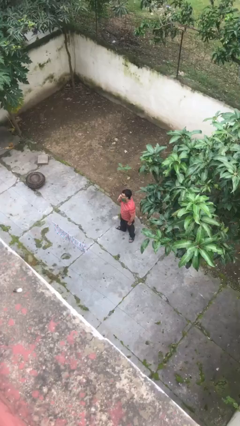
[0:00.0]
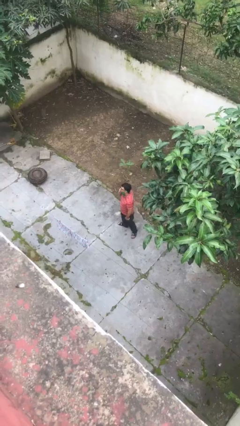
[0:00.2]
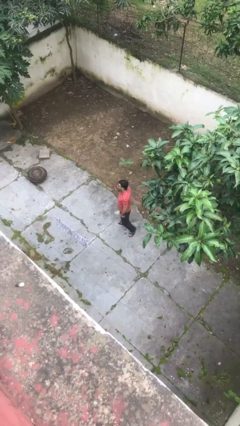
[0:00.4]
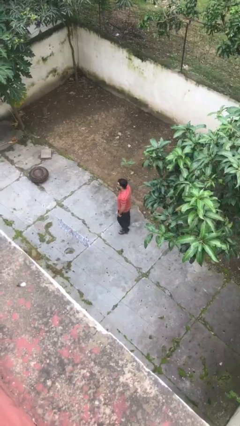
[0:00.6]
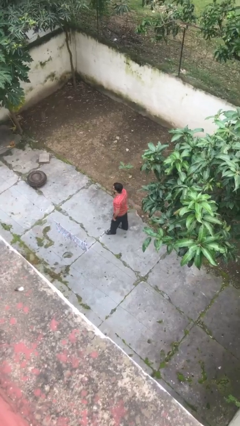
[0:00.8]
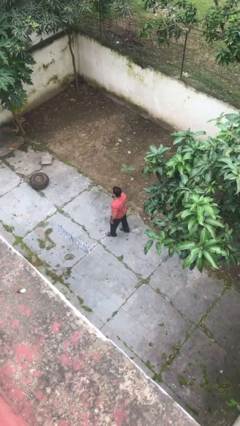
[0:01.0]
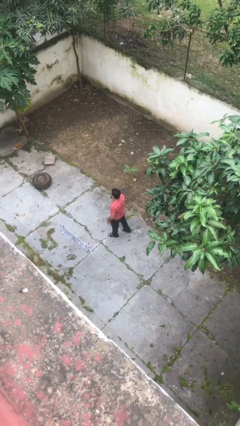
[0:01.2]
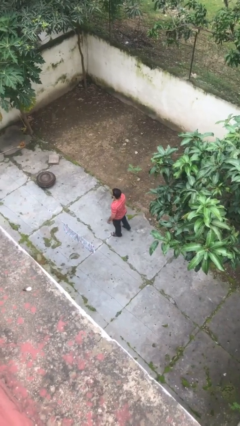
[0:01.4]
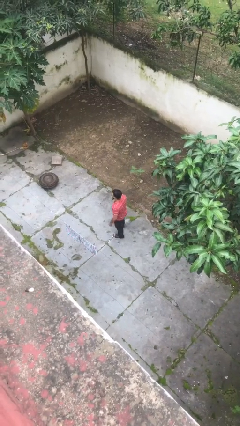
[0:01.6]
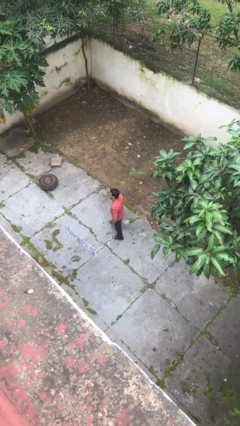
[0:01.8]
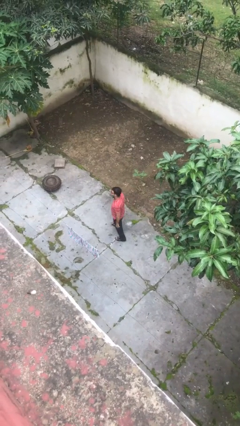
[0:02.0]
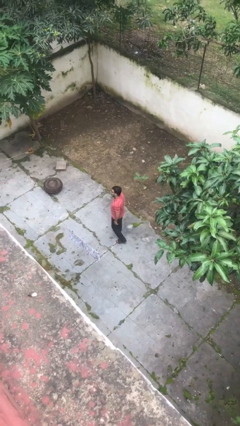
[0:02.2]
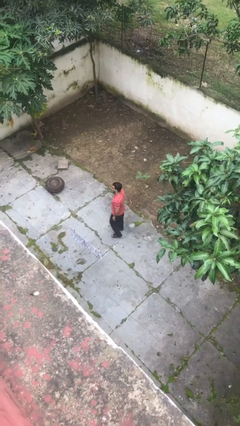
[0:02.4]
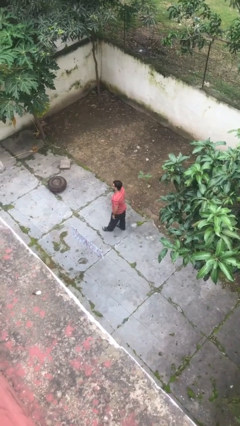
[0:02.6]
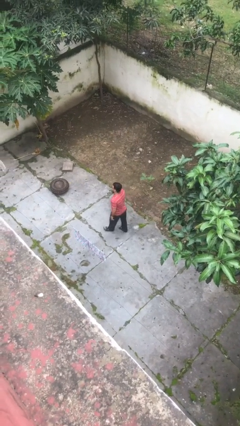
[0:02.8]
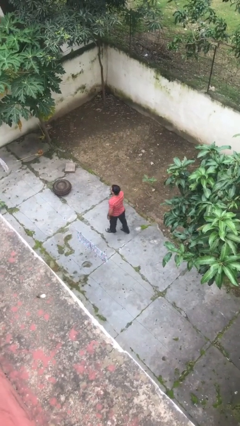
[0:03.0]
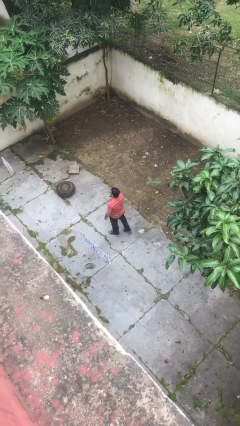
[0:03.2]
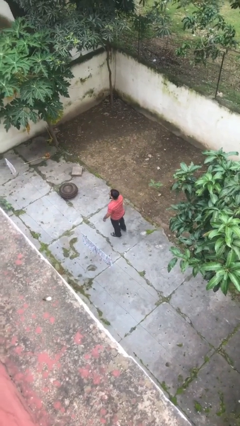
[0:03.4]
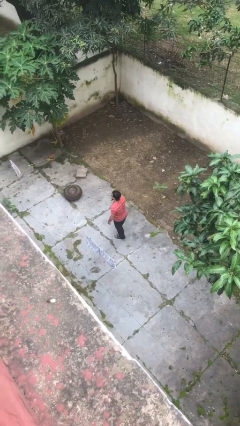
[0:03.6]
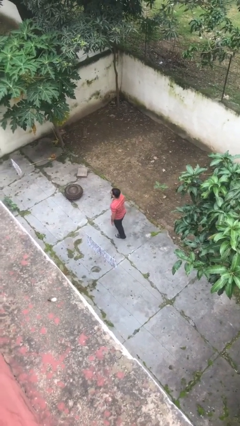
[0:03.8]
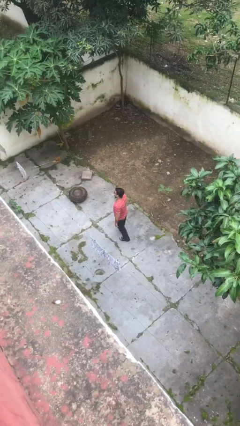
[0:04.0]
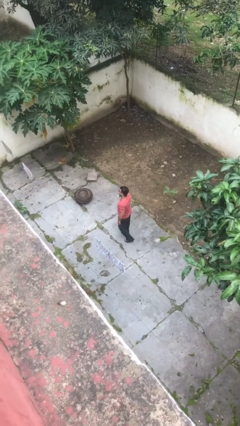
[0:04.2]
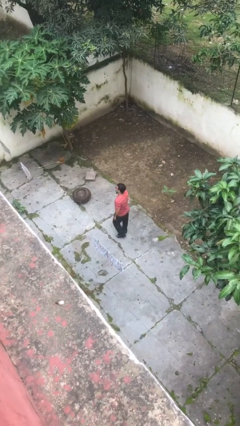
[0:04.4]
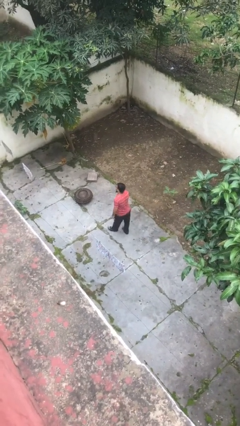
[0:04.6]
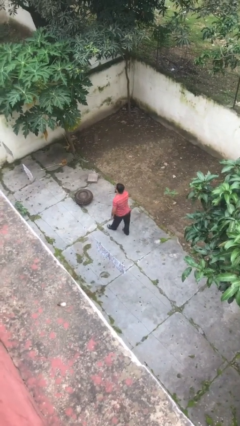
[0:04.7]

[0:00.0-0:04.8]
person talks on phone

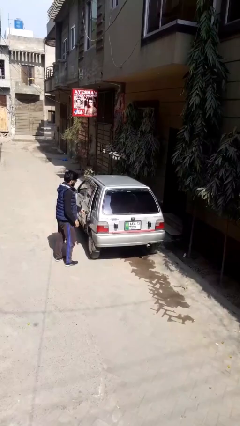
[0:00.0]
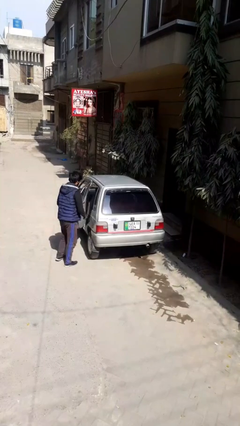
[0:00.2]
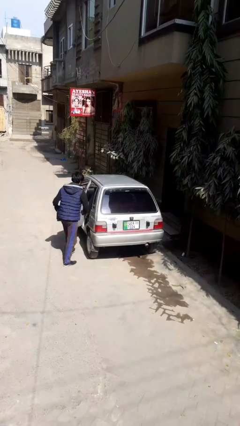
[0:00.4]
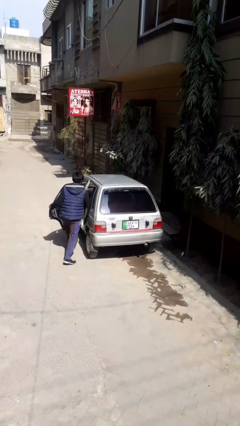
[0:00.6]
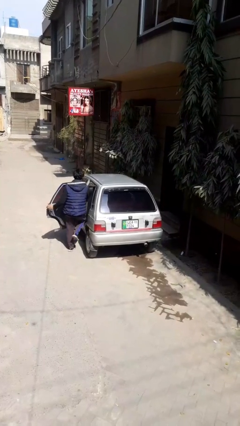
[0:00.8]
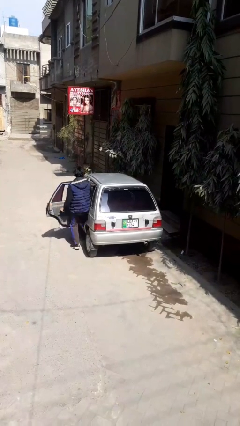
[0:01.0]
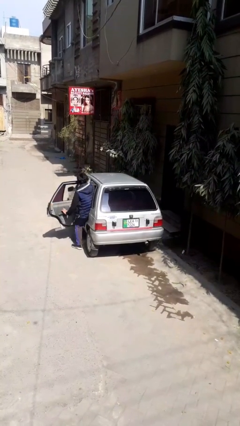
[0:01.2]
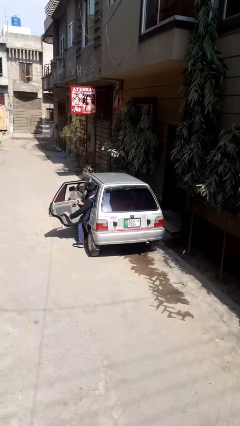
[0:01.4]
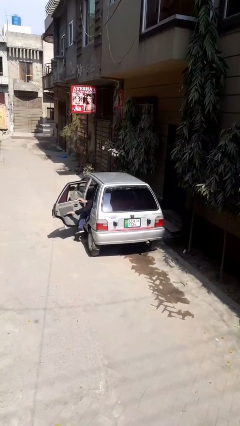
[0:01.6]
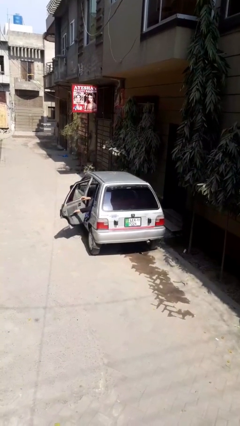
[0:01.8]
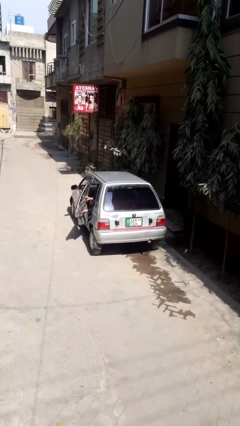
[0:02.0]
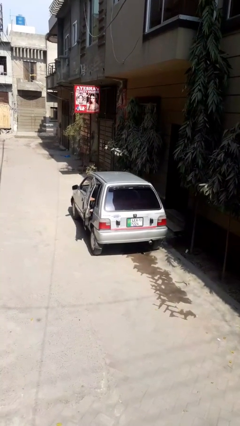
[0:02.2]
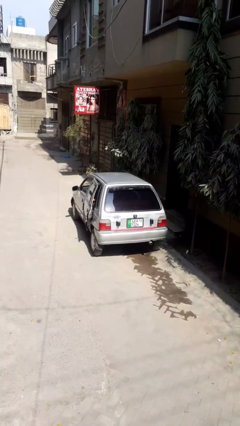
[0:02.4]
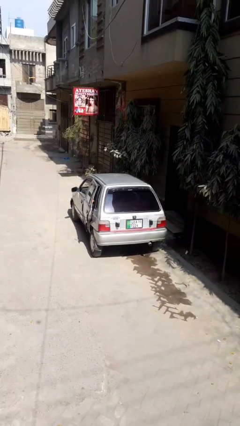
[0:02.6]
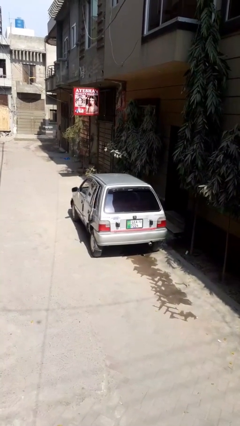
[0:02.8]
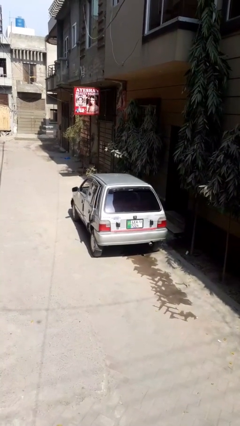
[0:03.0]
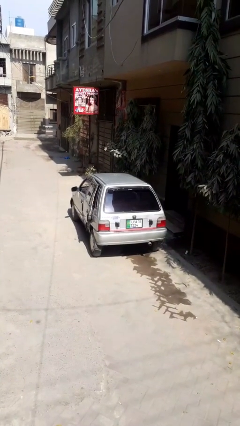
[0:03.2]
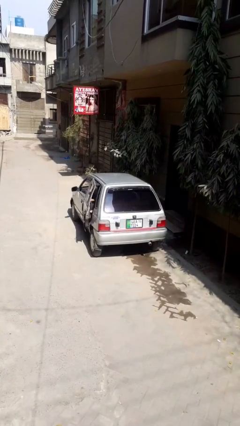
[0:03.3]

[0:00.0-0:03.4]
car picks up person

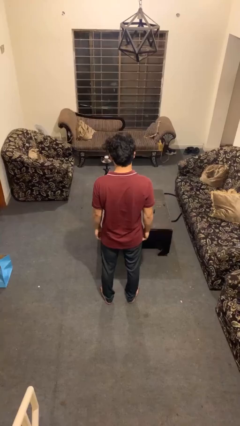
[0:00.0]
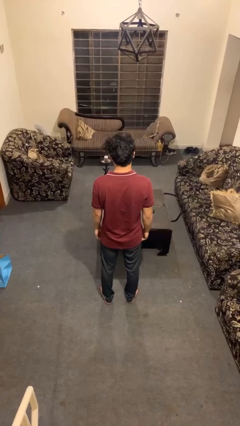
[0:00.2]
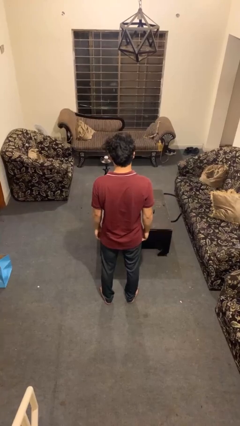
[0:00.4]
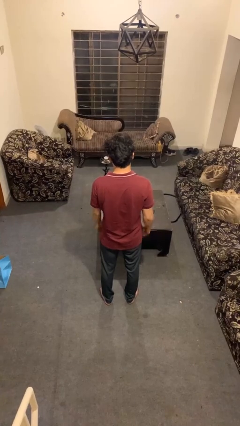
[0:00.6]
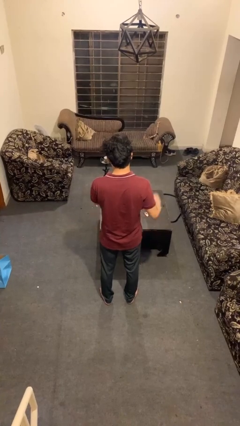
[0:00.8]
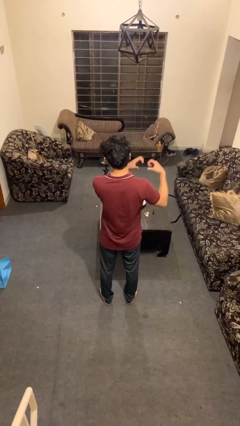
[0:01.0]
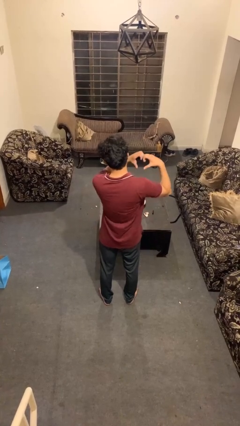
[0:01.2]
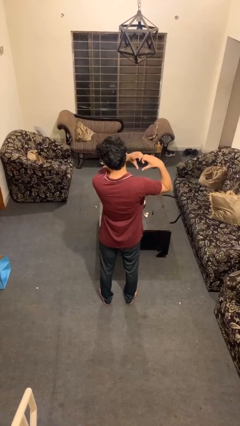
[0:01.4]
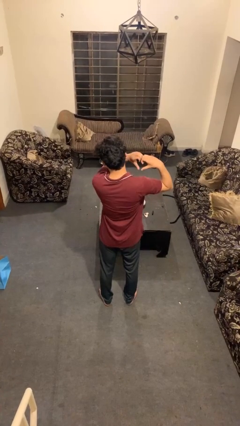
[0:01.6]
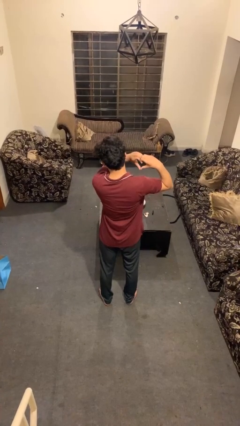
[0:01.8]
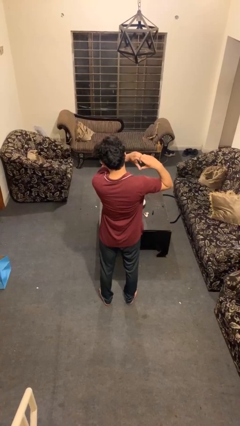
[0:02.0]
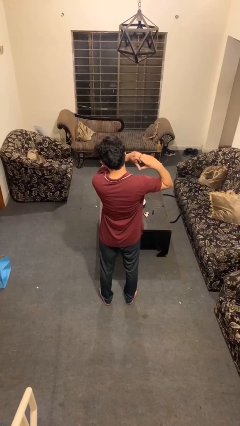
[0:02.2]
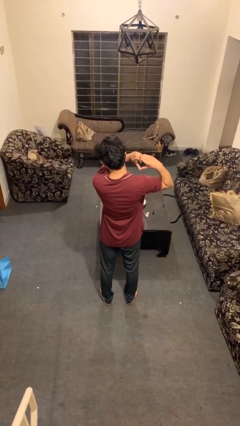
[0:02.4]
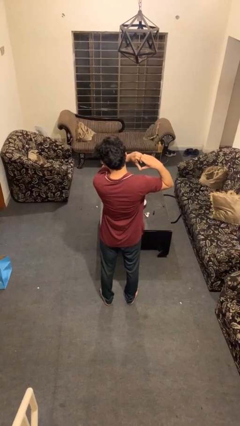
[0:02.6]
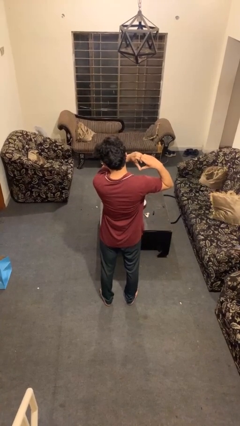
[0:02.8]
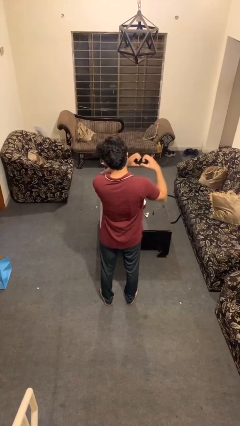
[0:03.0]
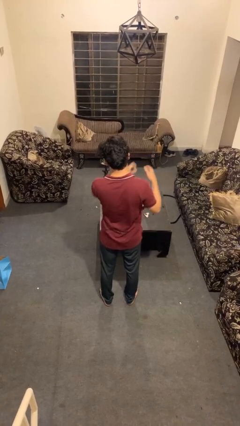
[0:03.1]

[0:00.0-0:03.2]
person gestures heart

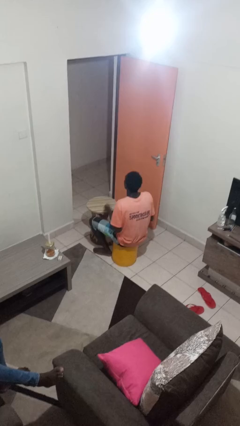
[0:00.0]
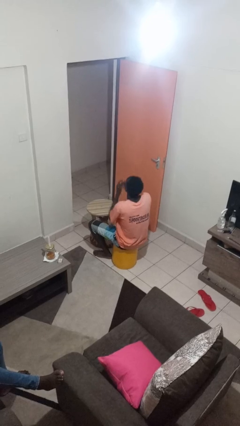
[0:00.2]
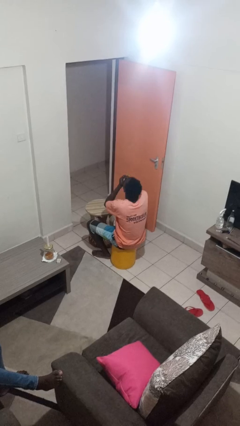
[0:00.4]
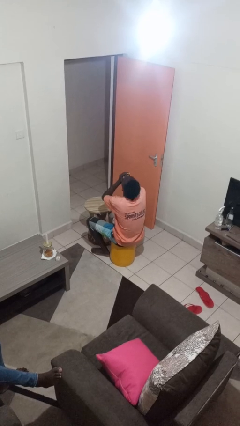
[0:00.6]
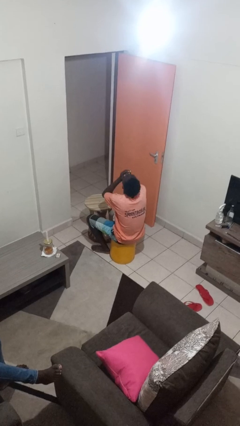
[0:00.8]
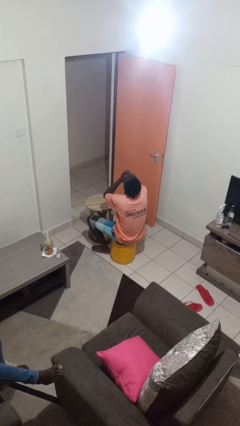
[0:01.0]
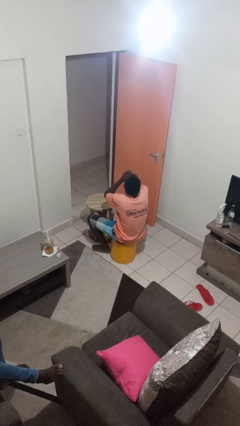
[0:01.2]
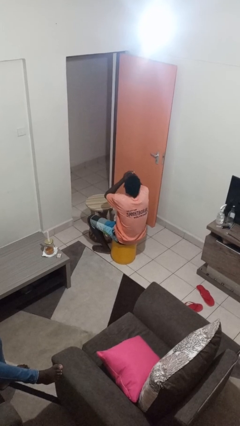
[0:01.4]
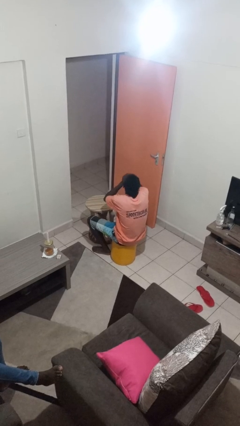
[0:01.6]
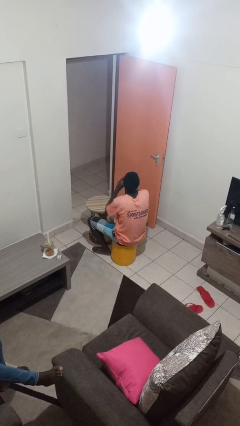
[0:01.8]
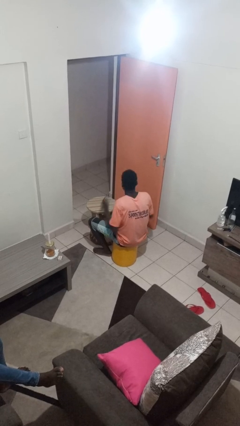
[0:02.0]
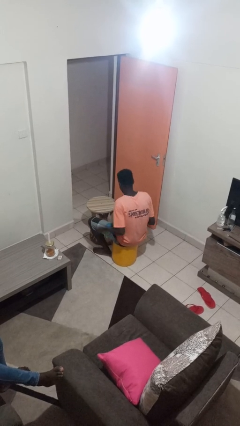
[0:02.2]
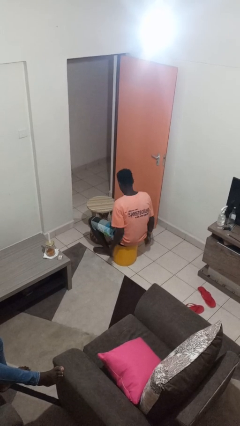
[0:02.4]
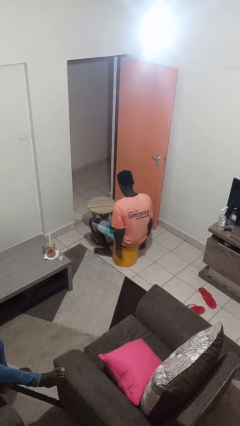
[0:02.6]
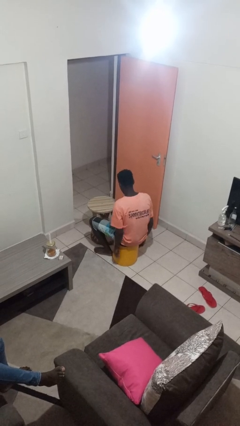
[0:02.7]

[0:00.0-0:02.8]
person yawns

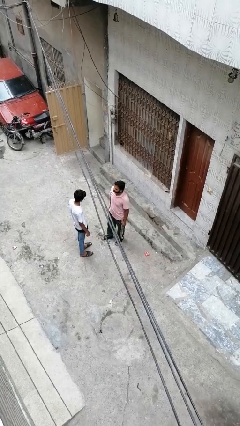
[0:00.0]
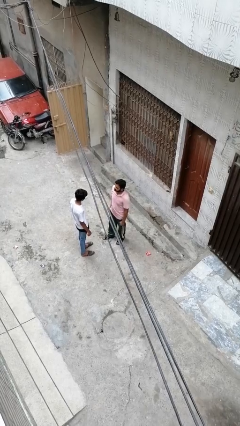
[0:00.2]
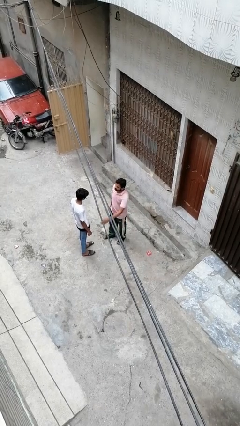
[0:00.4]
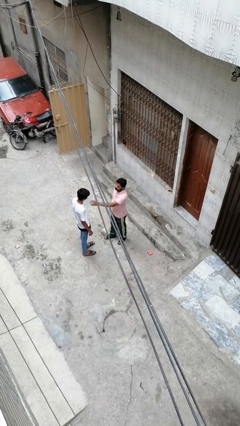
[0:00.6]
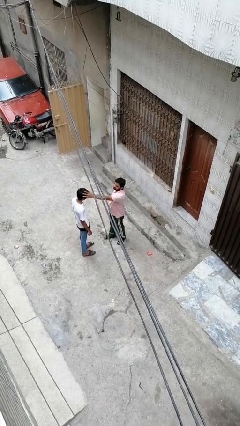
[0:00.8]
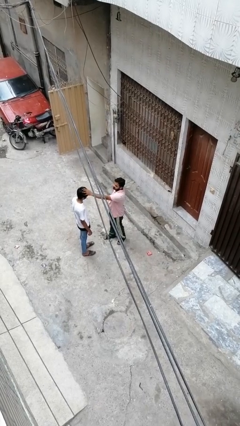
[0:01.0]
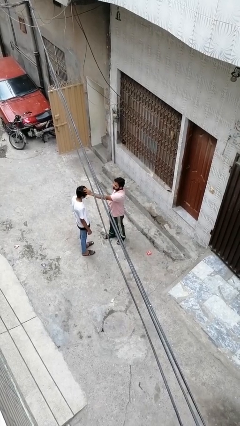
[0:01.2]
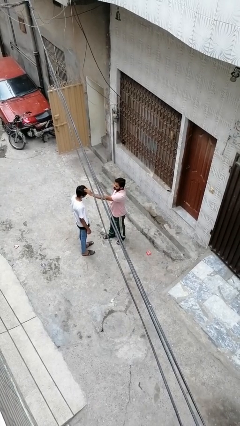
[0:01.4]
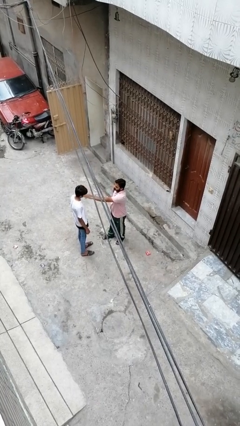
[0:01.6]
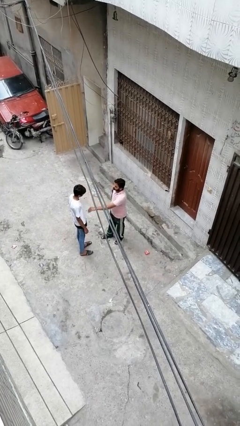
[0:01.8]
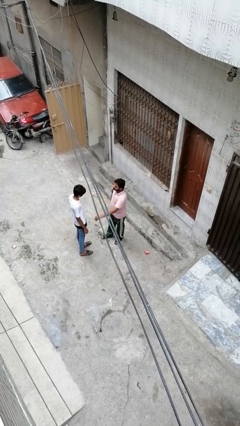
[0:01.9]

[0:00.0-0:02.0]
person grabs person by hair

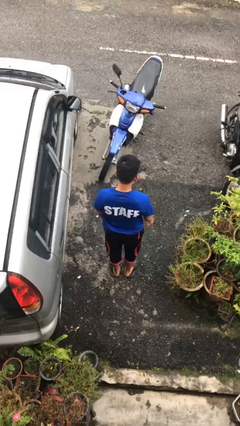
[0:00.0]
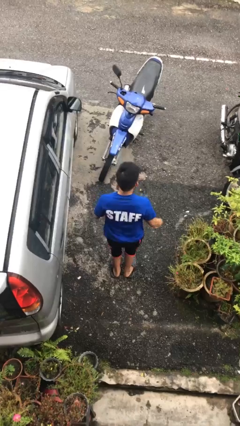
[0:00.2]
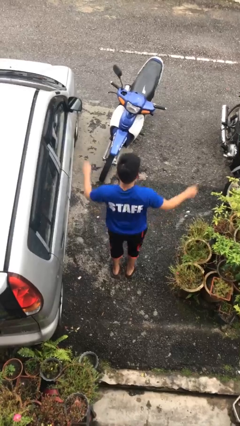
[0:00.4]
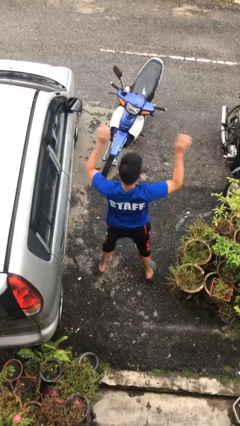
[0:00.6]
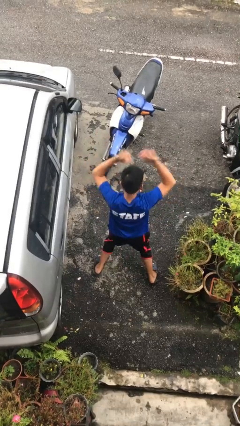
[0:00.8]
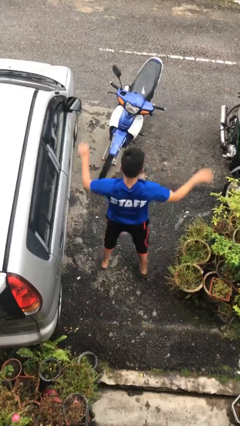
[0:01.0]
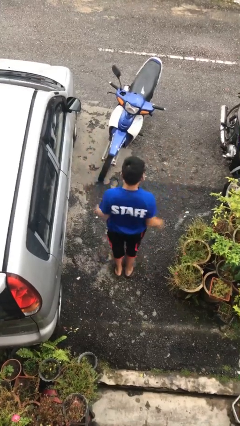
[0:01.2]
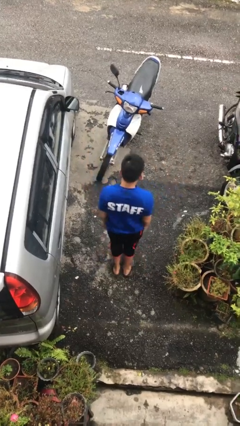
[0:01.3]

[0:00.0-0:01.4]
person exercises with jumping jacks
